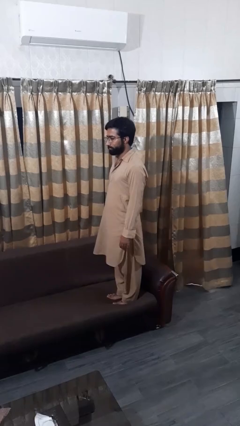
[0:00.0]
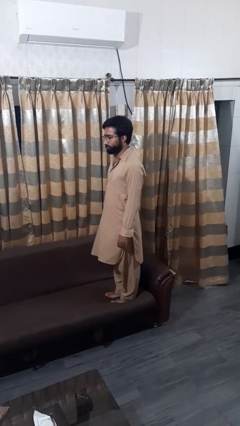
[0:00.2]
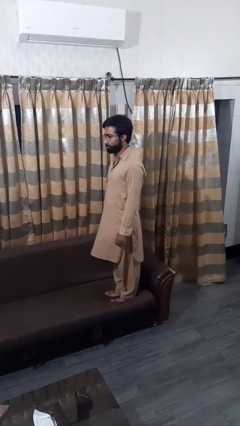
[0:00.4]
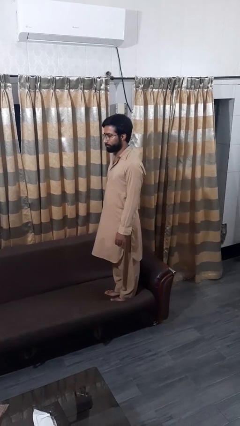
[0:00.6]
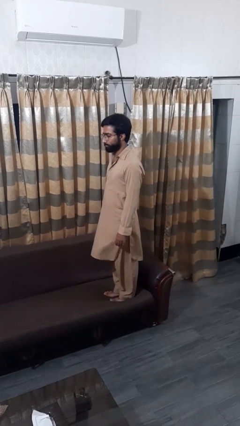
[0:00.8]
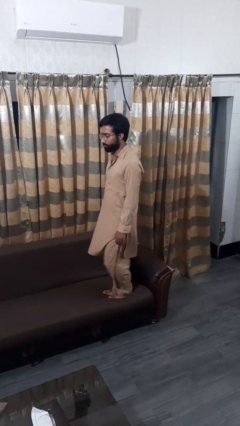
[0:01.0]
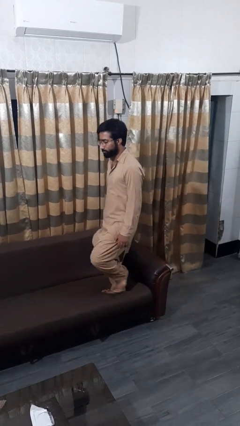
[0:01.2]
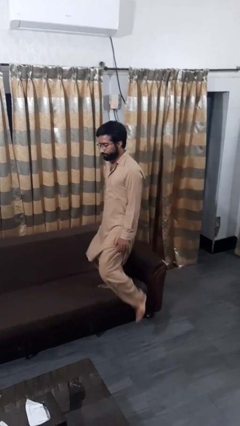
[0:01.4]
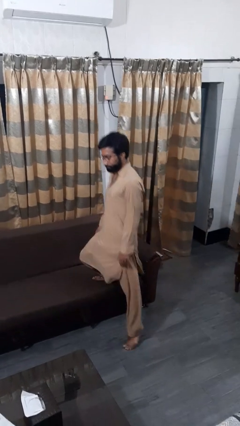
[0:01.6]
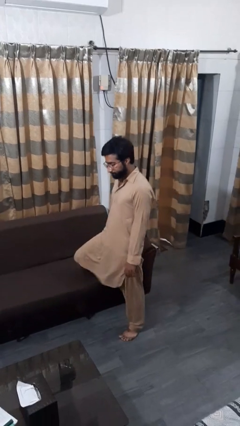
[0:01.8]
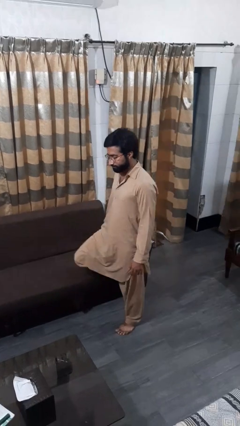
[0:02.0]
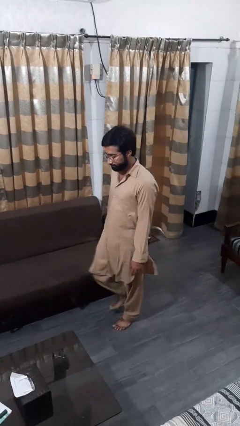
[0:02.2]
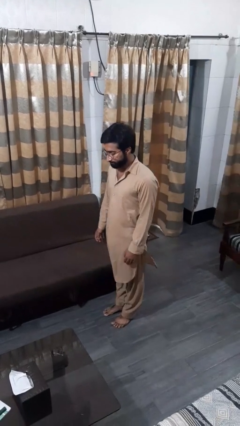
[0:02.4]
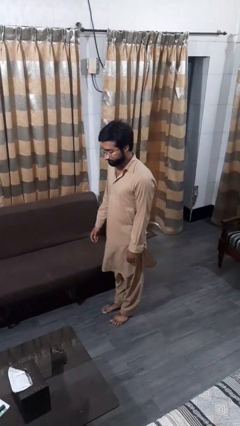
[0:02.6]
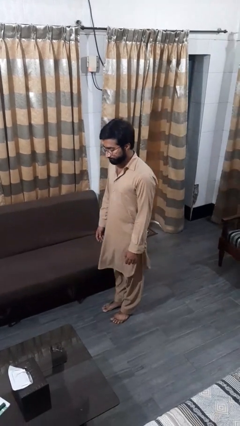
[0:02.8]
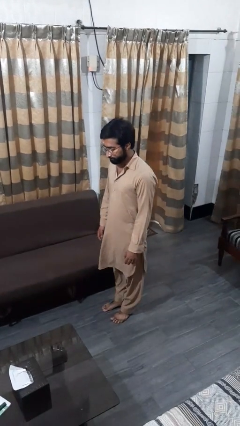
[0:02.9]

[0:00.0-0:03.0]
person climbs off couch

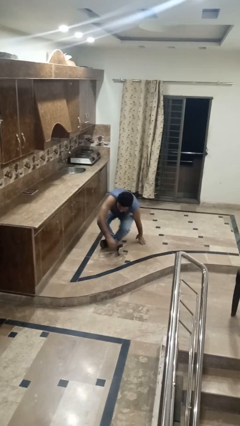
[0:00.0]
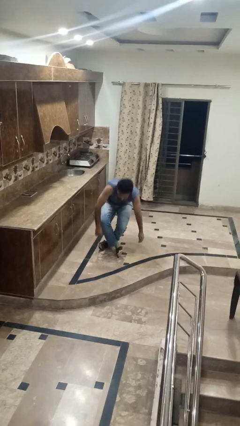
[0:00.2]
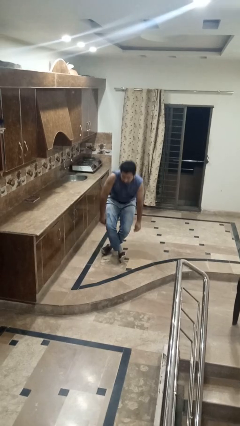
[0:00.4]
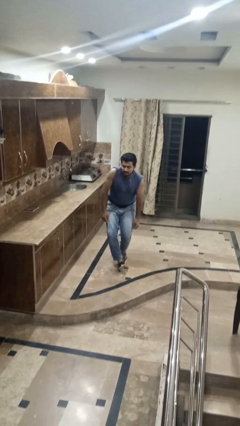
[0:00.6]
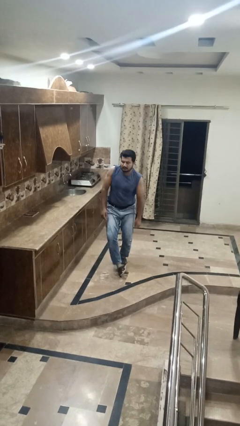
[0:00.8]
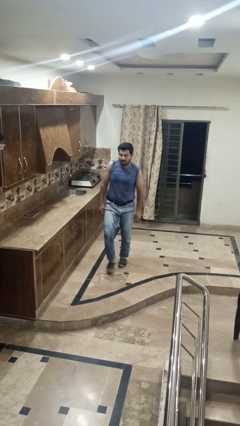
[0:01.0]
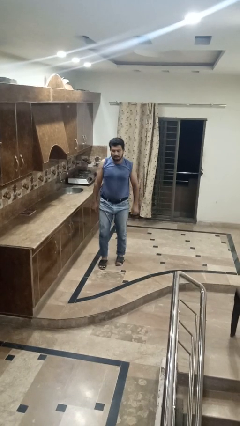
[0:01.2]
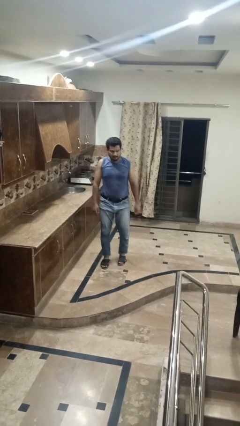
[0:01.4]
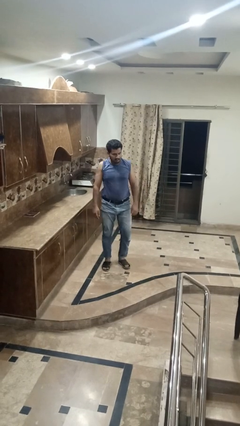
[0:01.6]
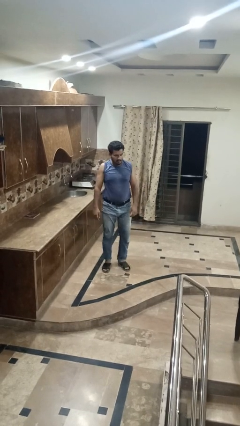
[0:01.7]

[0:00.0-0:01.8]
person stands up from floor

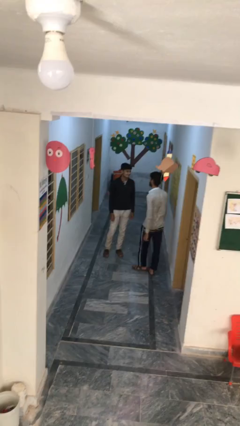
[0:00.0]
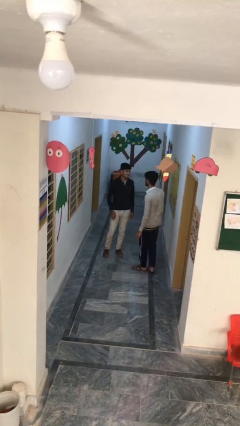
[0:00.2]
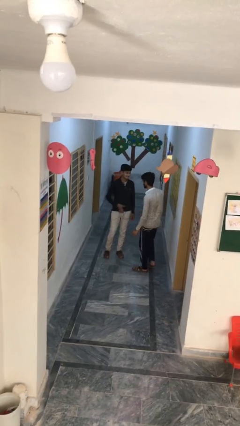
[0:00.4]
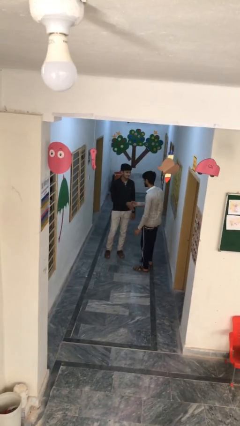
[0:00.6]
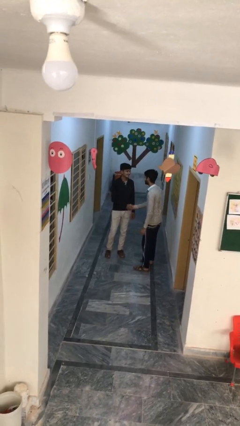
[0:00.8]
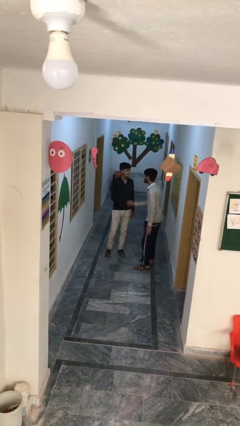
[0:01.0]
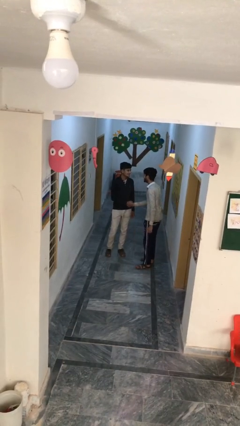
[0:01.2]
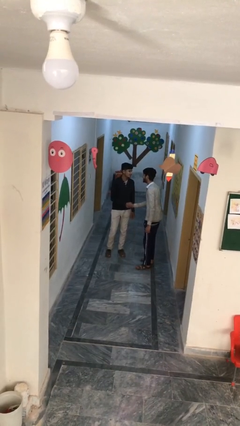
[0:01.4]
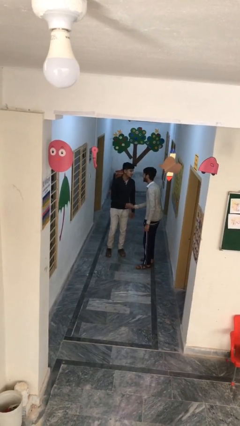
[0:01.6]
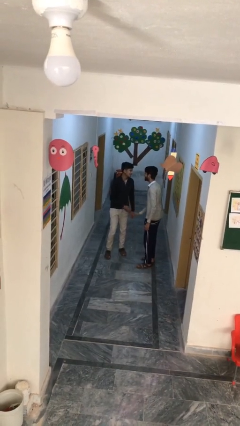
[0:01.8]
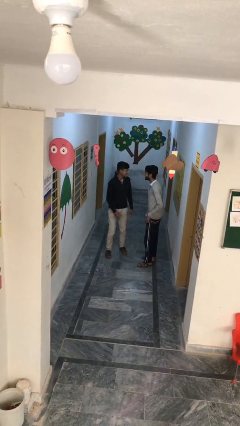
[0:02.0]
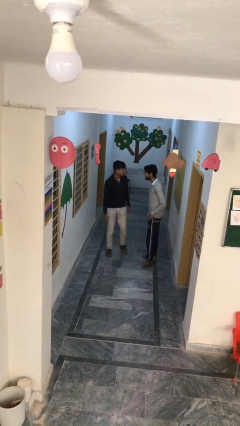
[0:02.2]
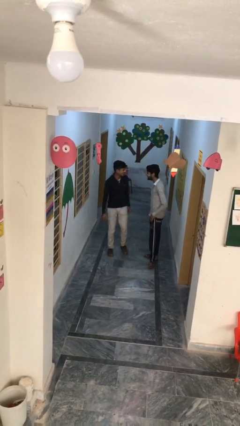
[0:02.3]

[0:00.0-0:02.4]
person shakes hand

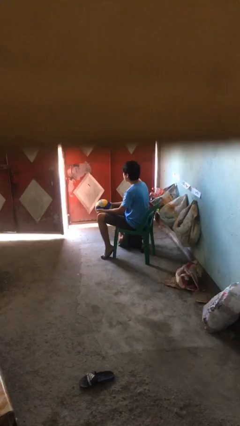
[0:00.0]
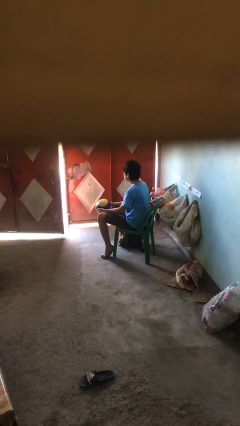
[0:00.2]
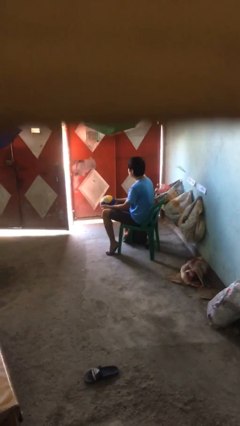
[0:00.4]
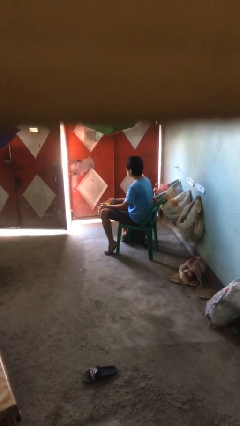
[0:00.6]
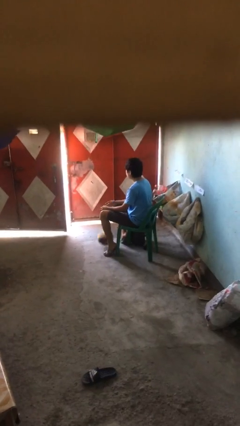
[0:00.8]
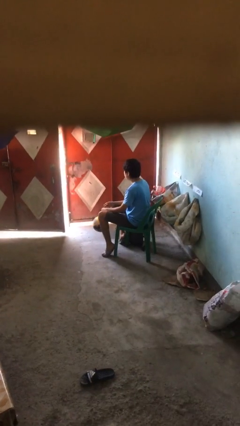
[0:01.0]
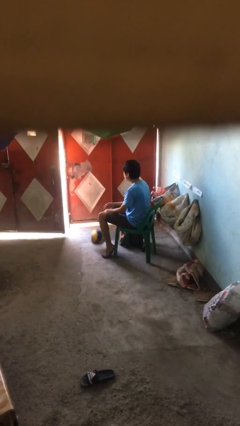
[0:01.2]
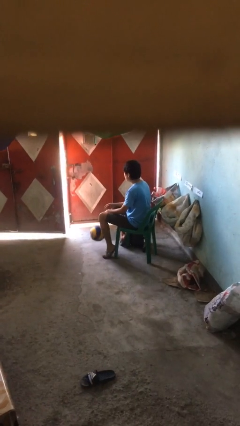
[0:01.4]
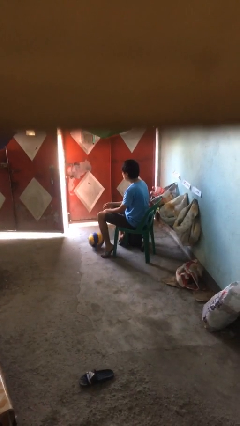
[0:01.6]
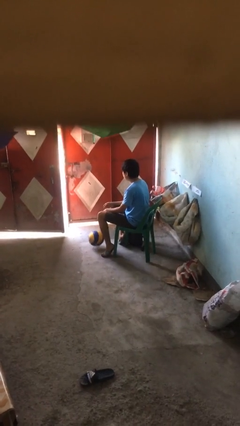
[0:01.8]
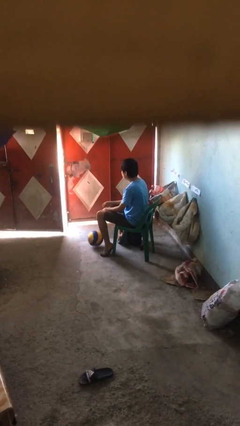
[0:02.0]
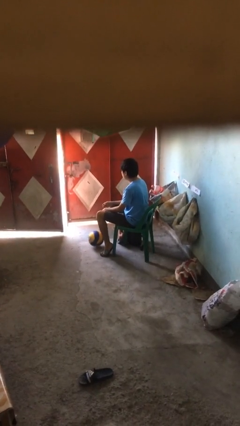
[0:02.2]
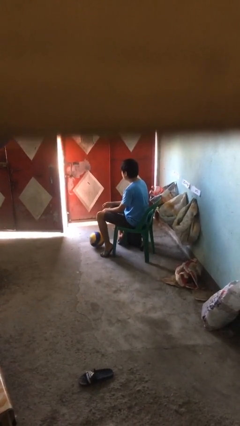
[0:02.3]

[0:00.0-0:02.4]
person drops object

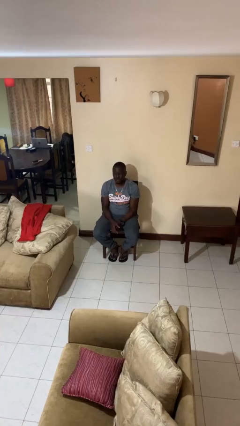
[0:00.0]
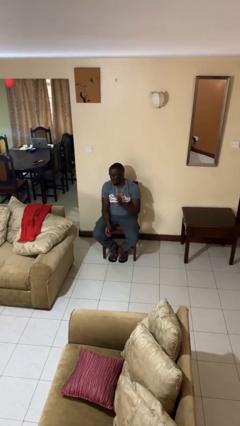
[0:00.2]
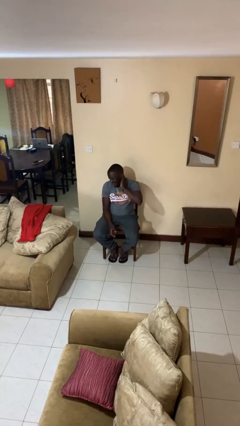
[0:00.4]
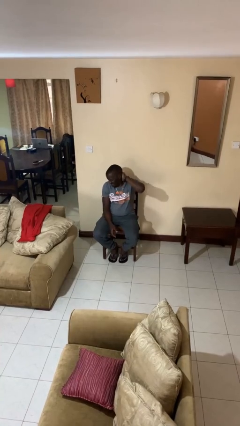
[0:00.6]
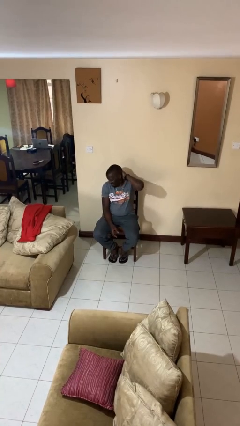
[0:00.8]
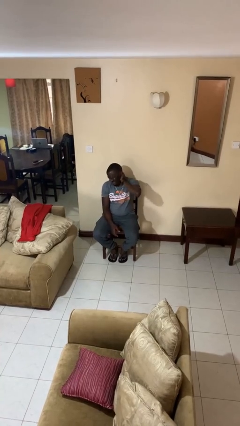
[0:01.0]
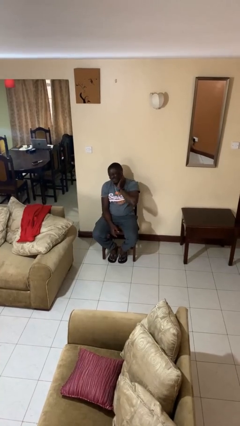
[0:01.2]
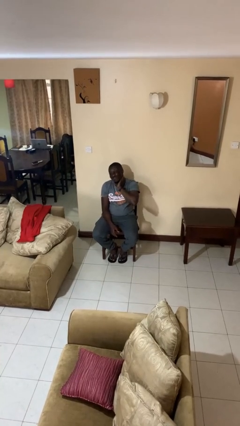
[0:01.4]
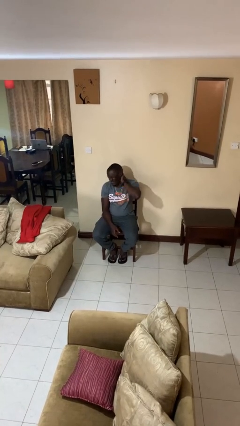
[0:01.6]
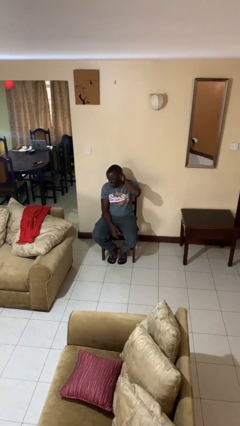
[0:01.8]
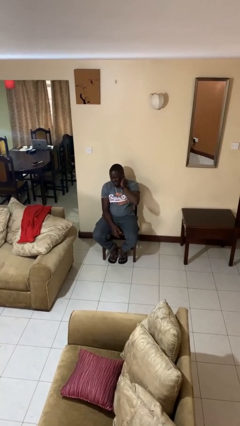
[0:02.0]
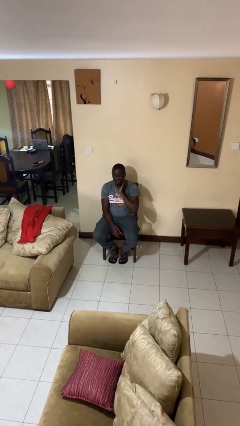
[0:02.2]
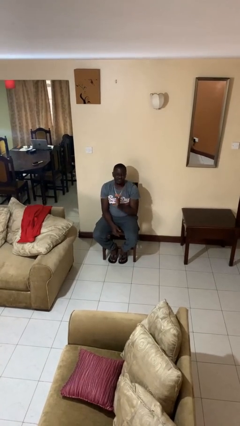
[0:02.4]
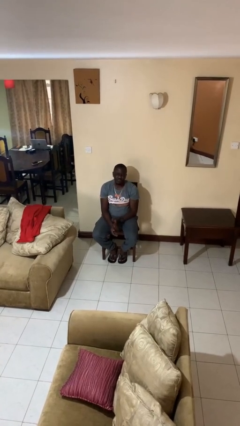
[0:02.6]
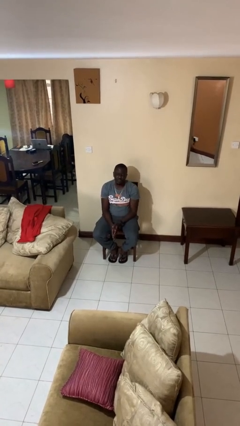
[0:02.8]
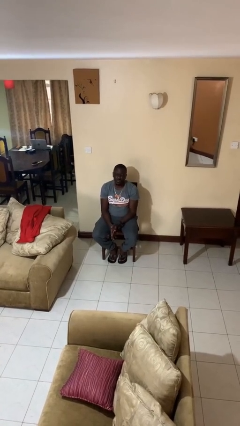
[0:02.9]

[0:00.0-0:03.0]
person rubs neck

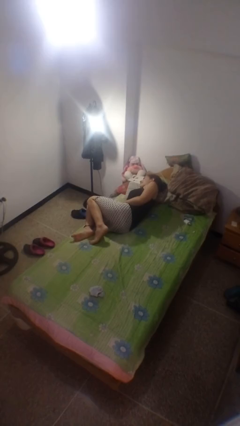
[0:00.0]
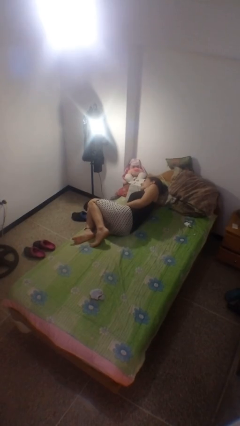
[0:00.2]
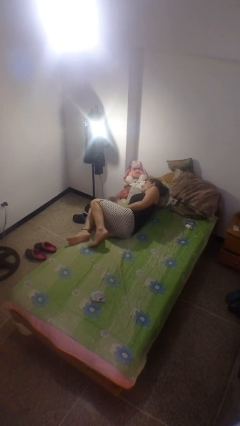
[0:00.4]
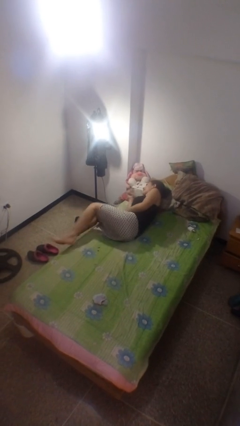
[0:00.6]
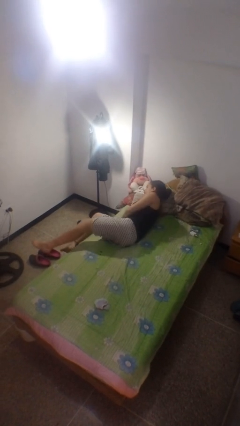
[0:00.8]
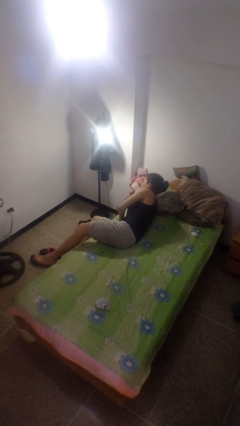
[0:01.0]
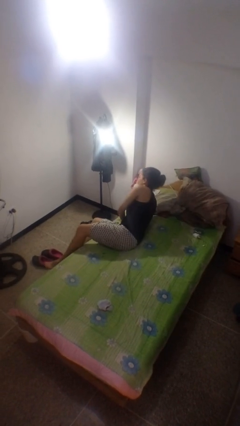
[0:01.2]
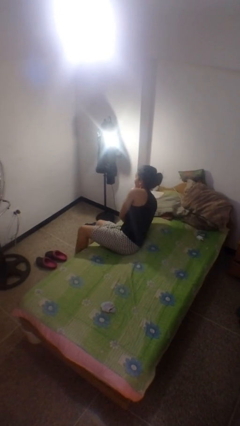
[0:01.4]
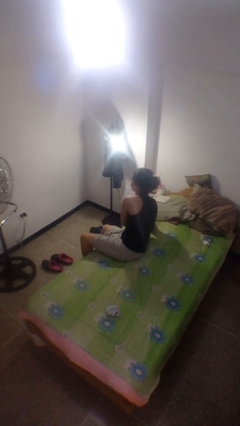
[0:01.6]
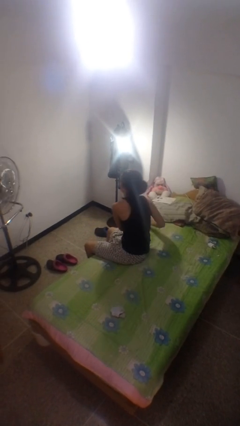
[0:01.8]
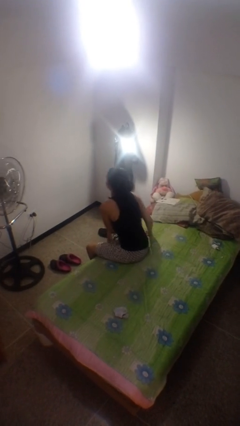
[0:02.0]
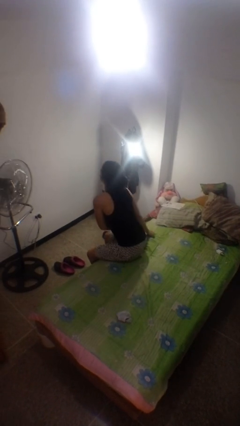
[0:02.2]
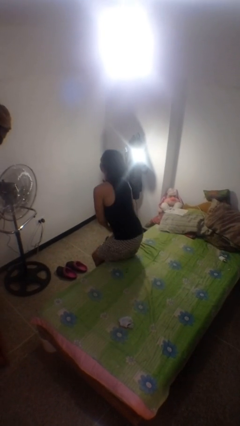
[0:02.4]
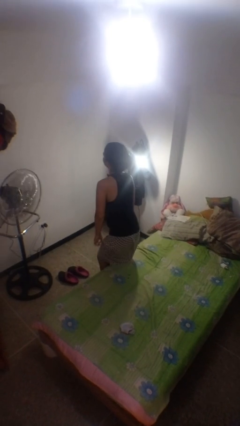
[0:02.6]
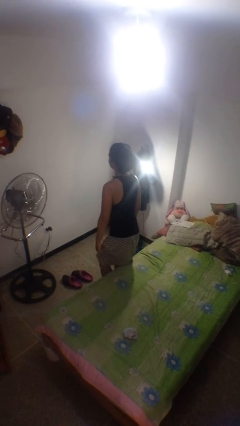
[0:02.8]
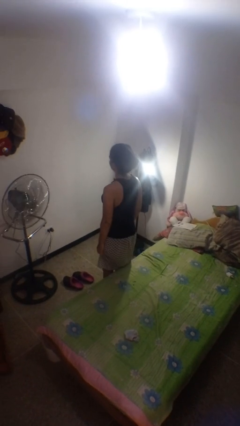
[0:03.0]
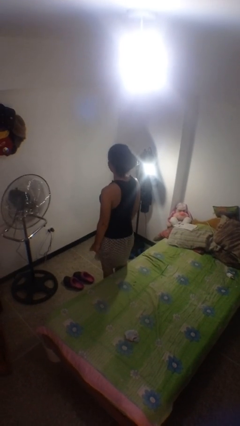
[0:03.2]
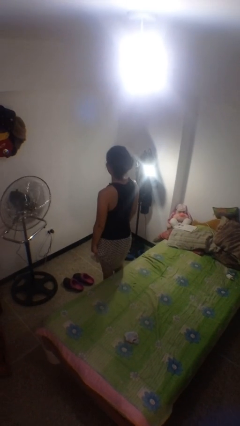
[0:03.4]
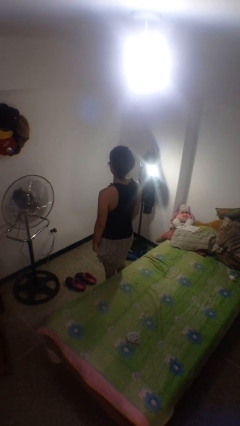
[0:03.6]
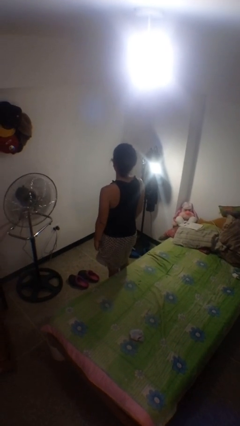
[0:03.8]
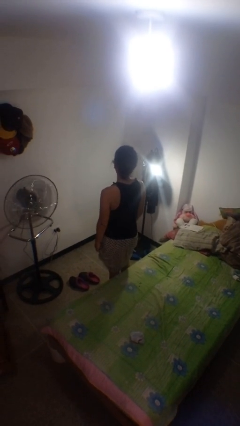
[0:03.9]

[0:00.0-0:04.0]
person stands up

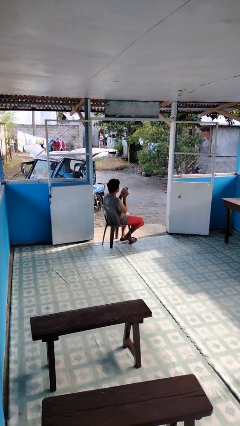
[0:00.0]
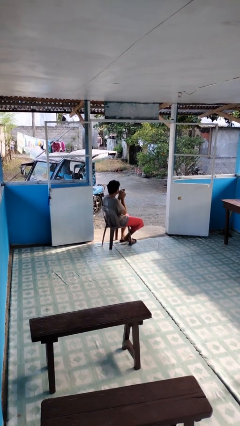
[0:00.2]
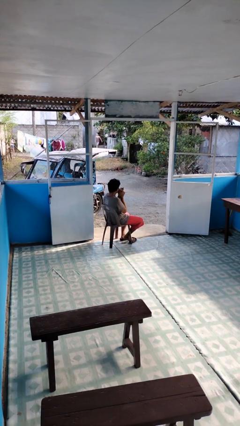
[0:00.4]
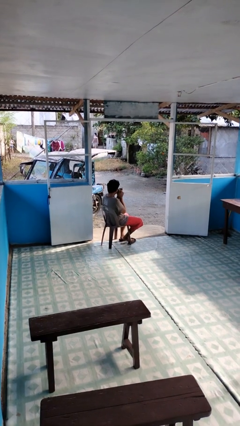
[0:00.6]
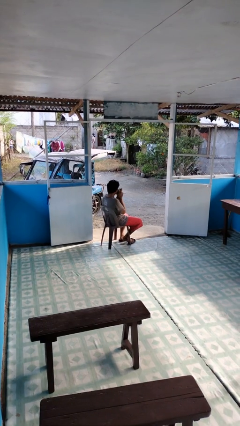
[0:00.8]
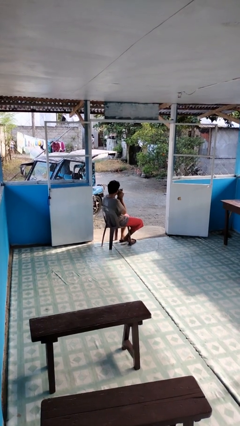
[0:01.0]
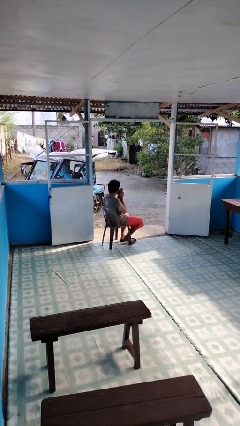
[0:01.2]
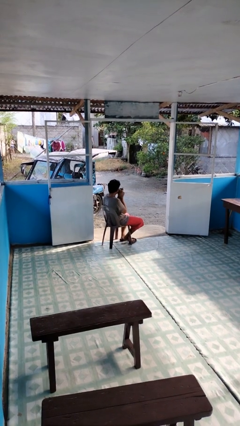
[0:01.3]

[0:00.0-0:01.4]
person hugs cat
